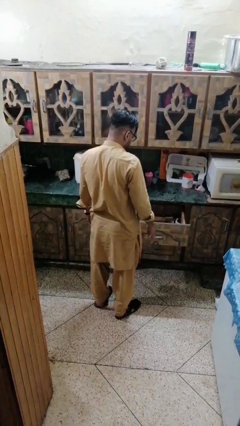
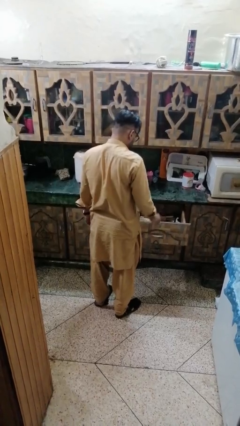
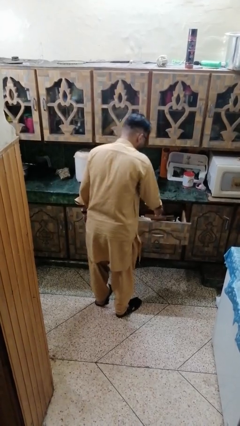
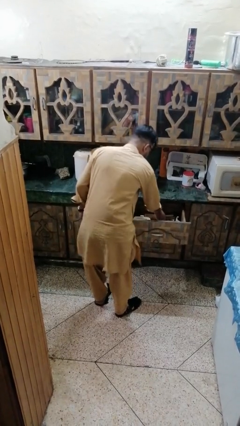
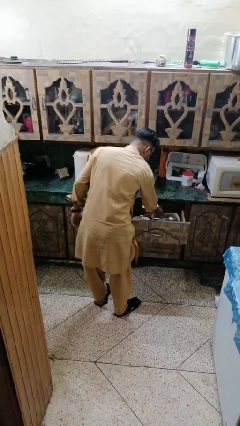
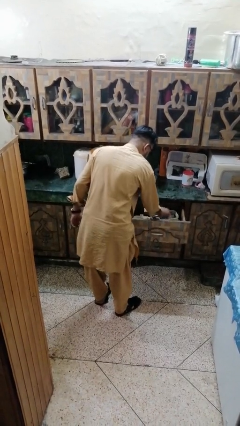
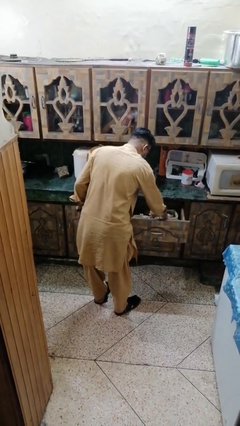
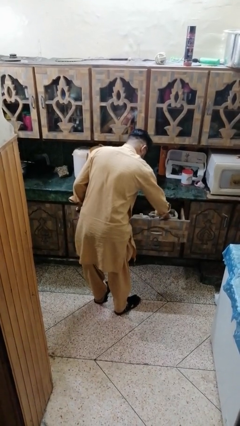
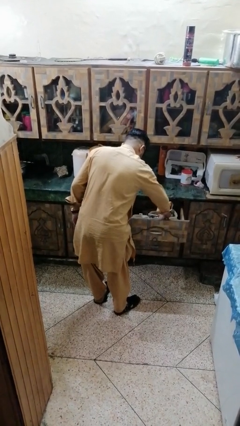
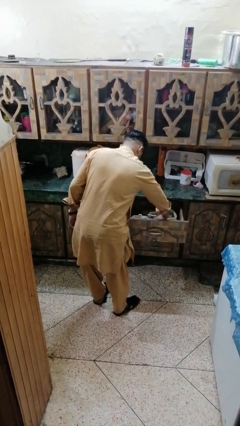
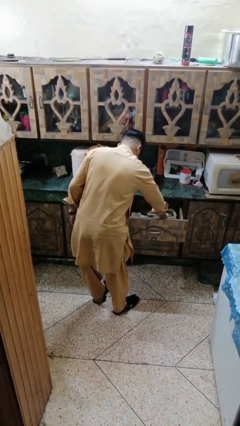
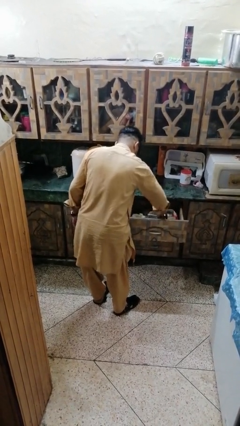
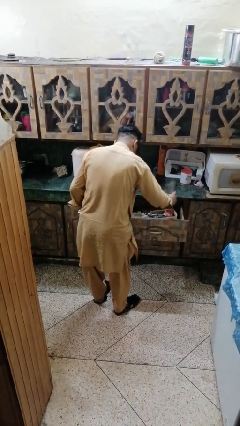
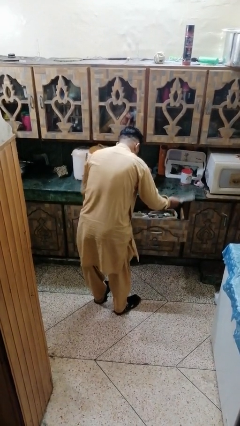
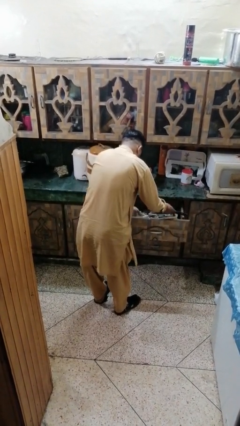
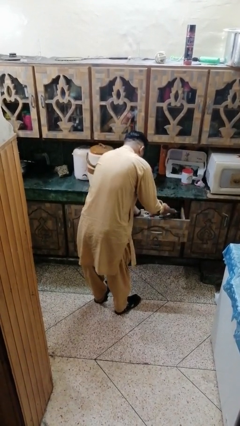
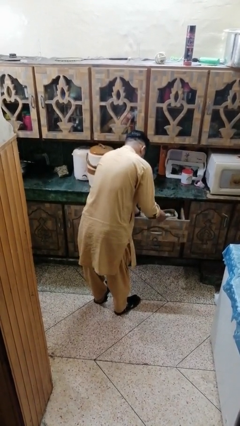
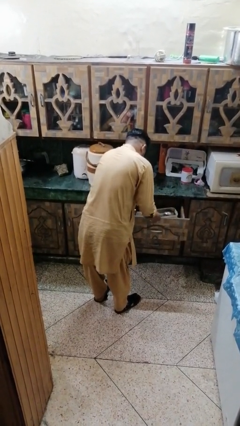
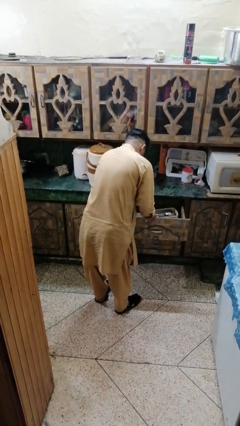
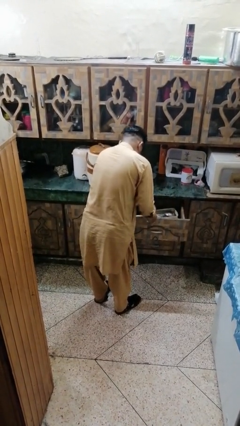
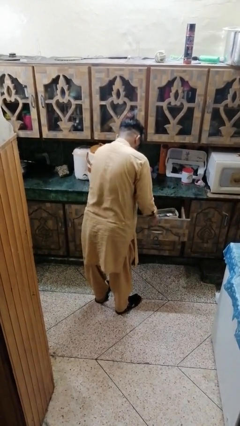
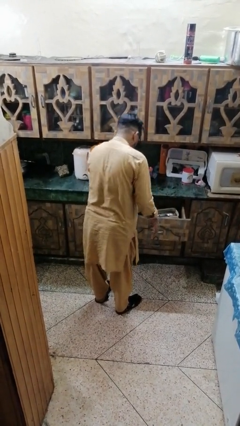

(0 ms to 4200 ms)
person searches in kitchen drawer

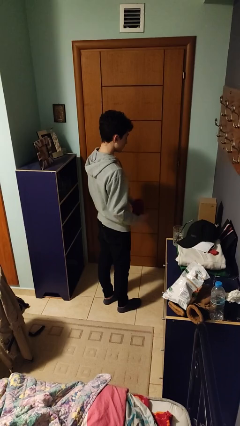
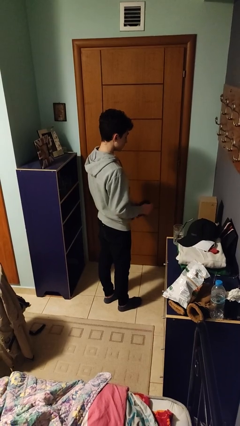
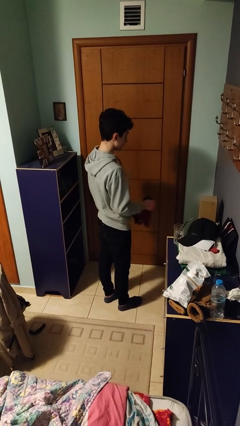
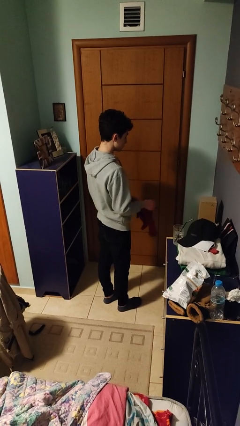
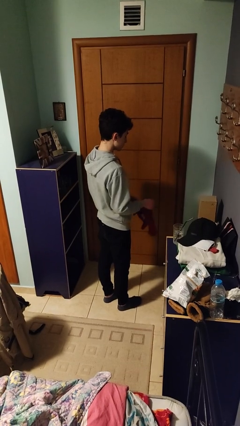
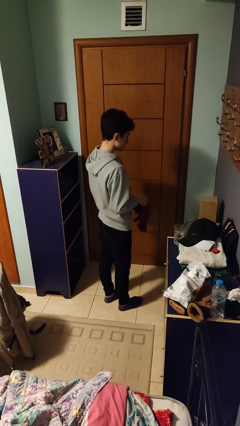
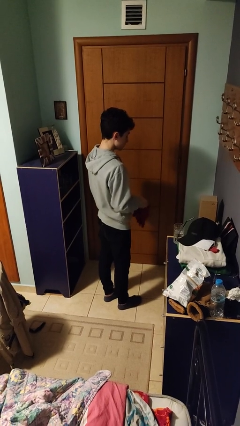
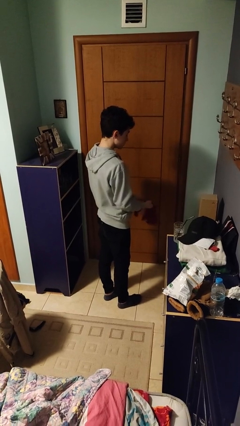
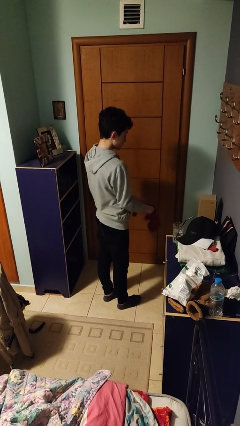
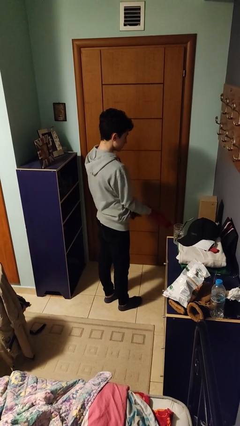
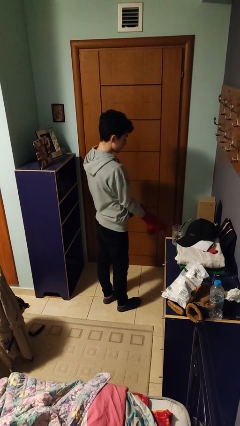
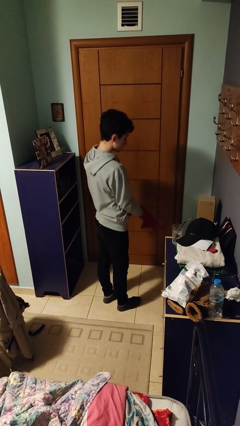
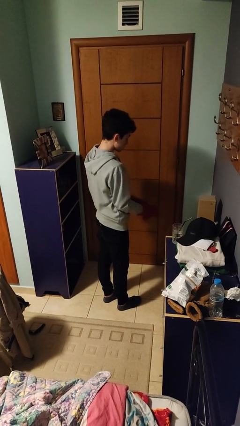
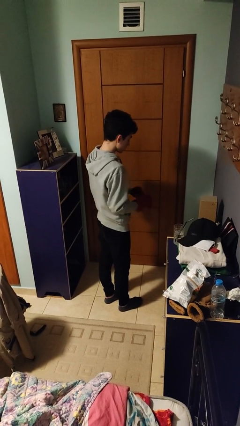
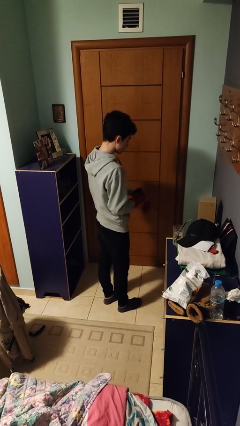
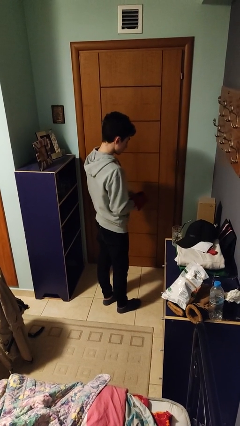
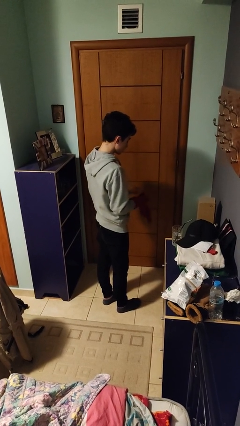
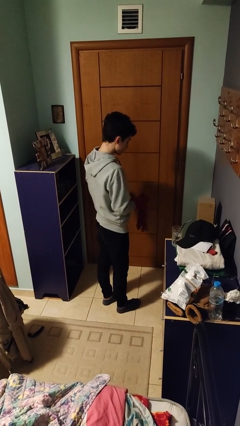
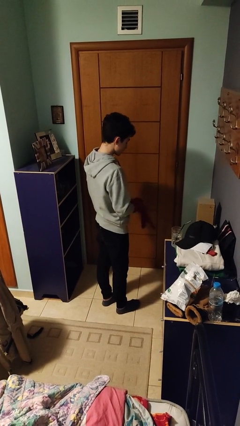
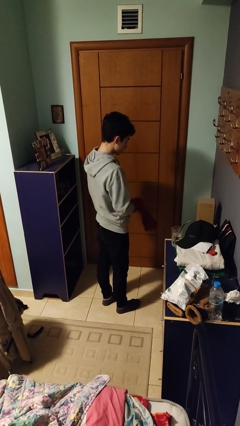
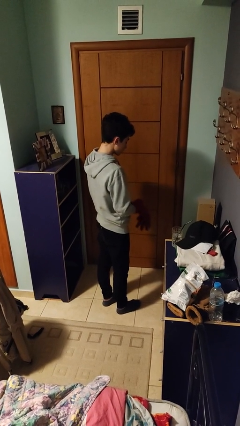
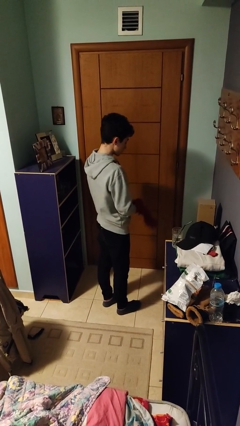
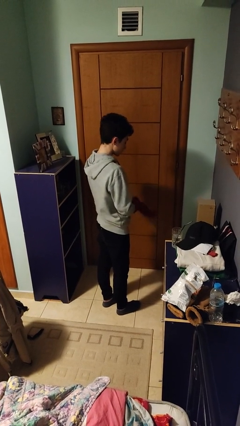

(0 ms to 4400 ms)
person puts on gloves

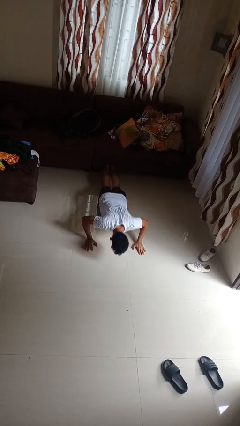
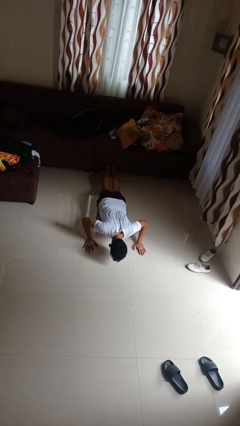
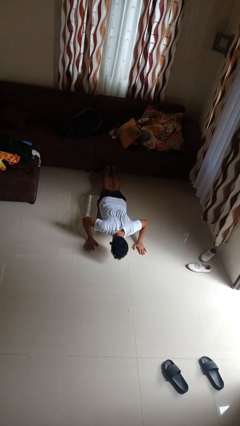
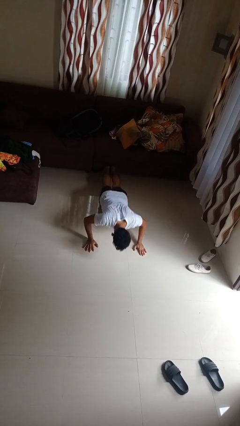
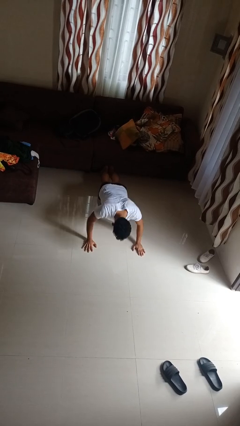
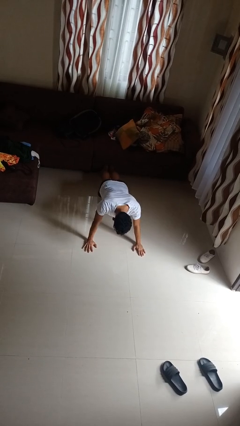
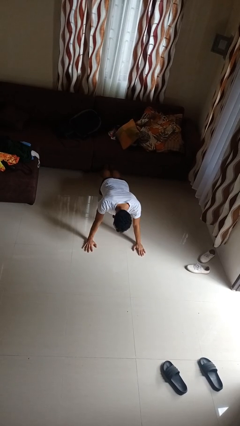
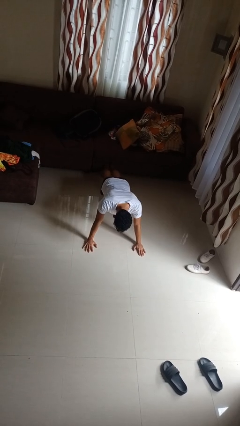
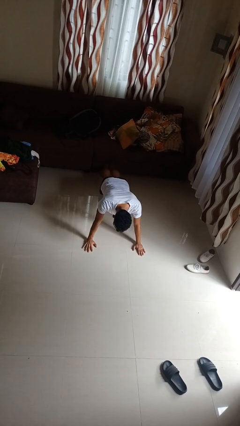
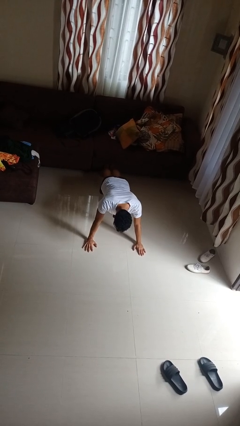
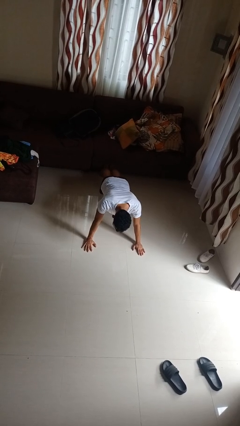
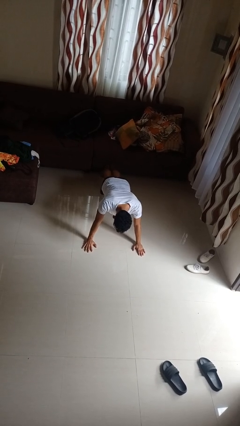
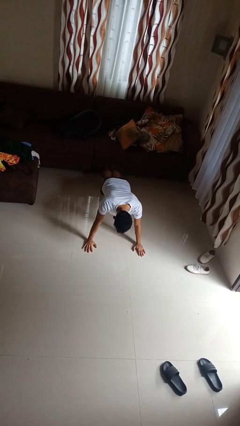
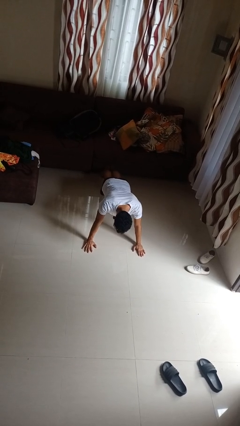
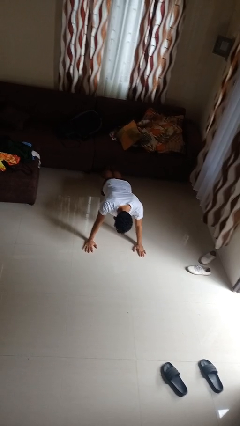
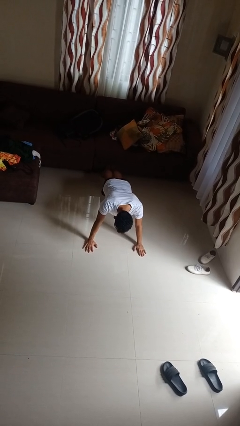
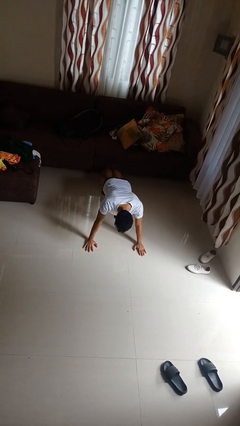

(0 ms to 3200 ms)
person exercises with pushup

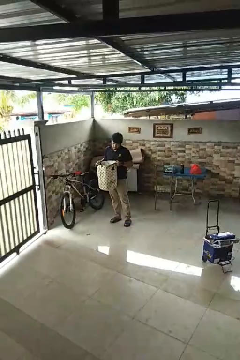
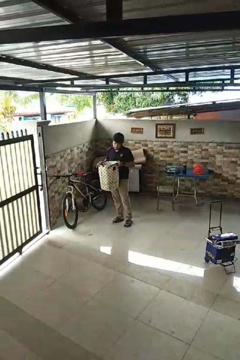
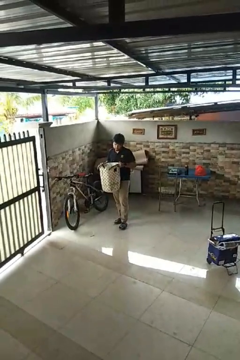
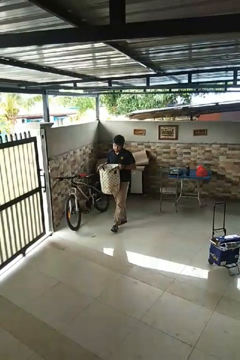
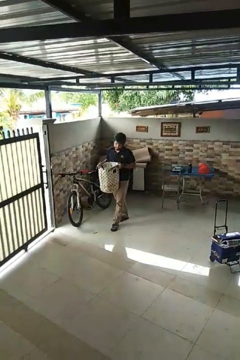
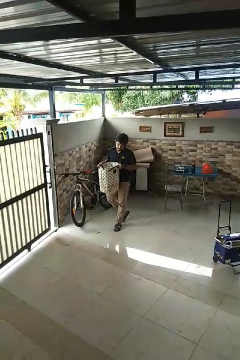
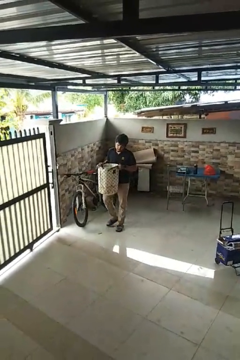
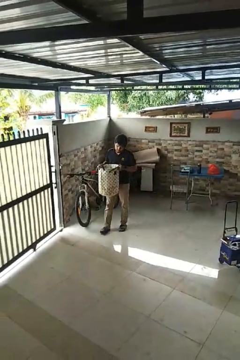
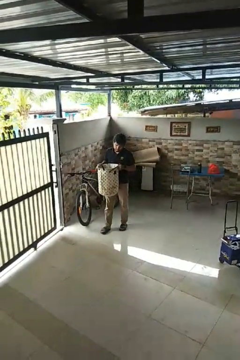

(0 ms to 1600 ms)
person carries laundry basket

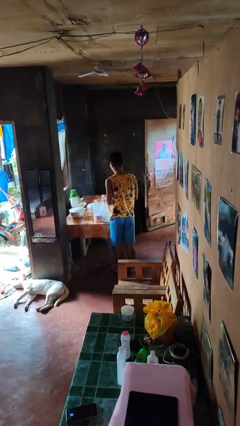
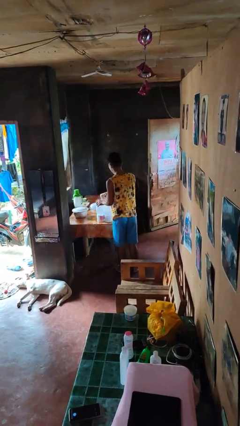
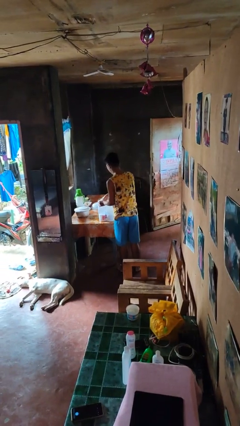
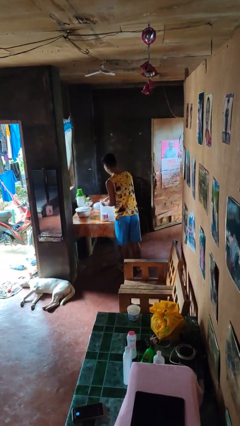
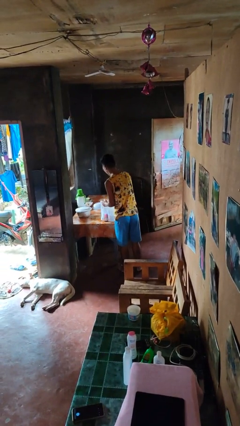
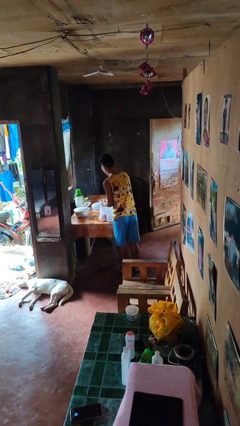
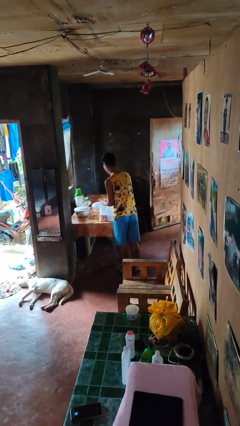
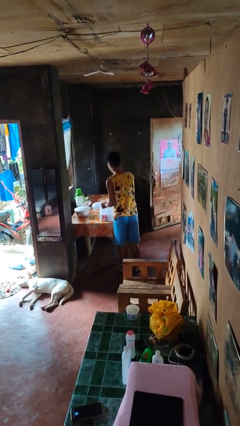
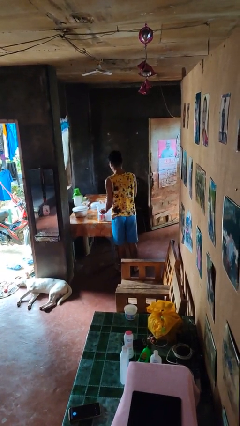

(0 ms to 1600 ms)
person puts object into bag

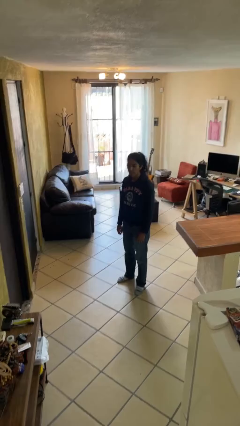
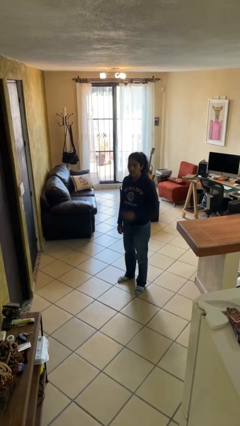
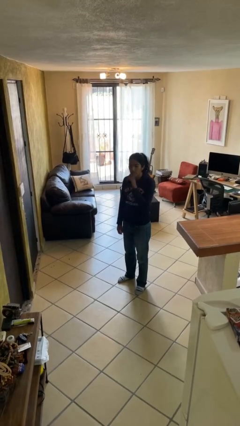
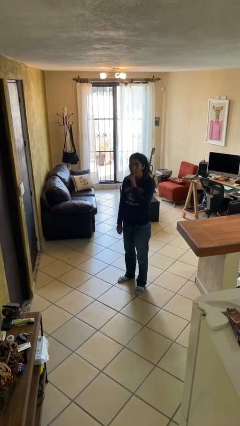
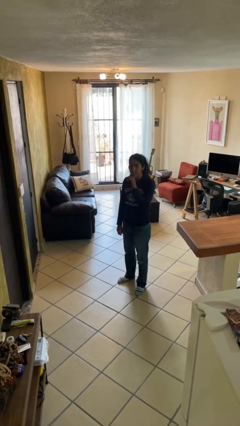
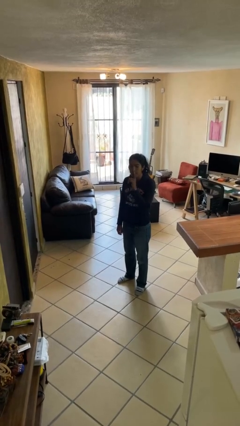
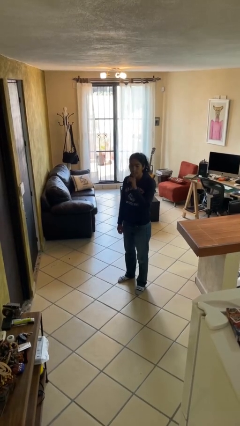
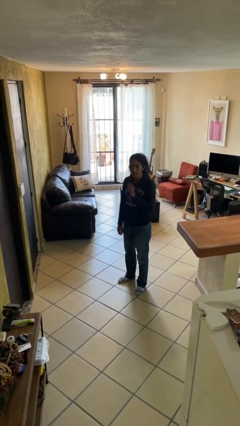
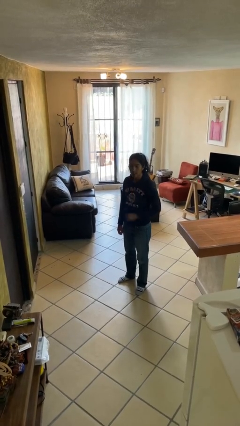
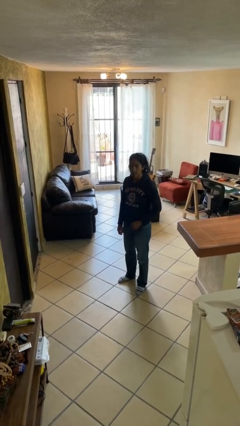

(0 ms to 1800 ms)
person gestures be quiet

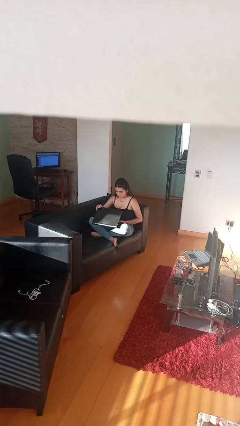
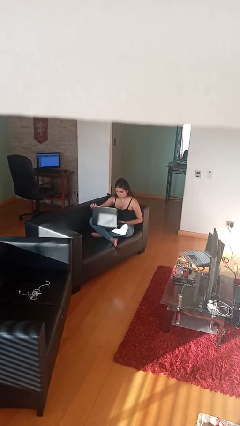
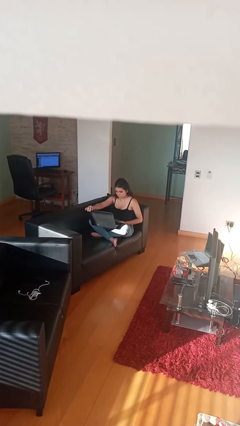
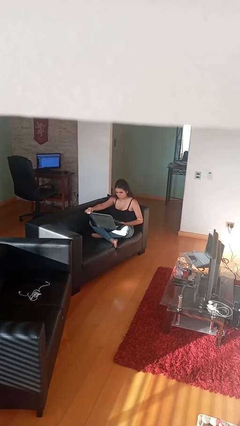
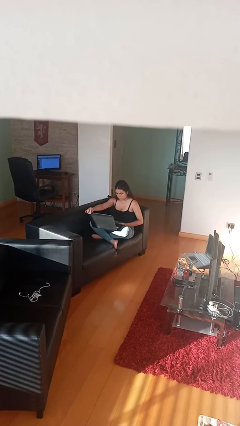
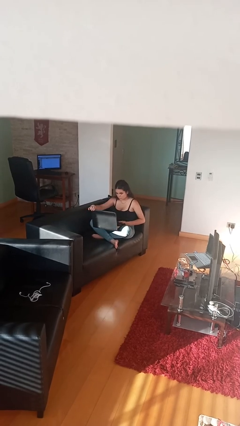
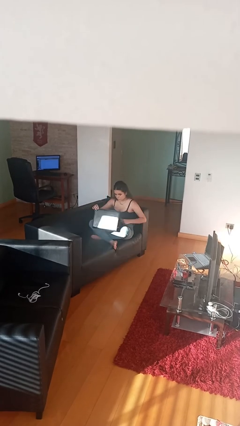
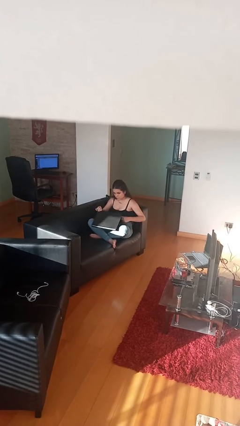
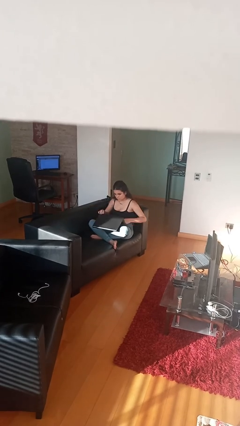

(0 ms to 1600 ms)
person interacts with laptop
